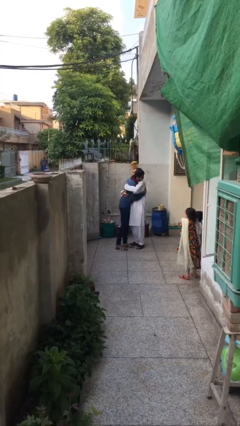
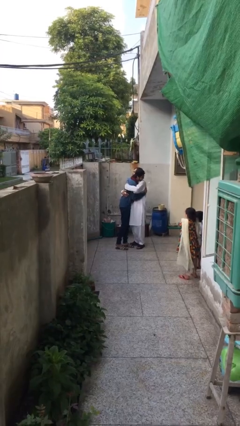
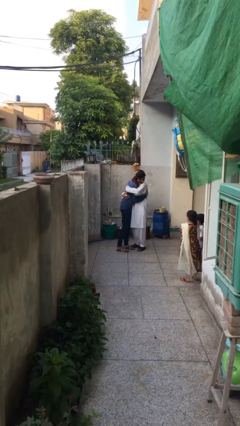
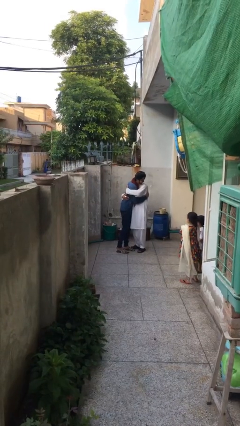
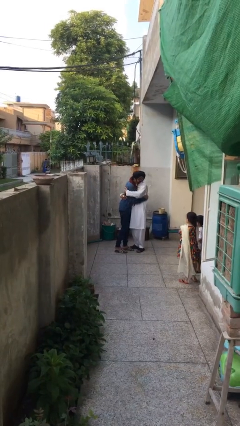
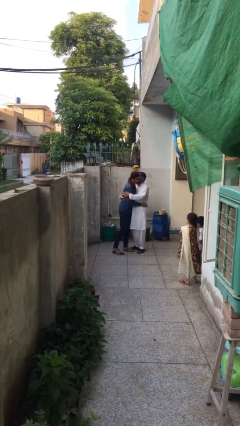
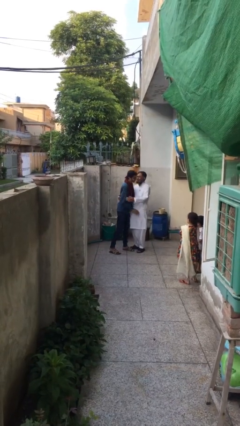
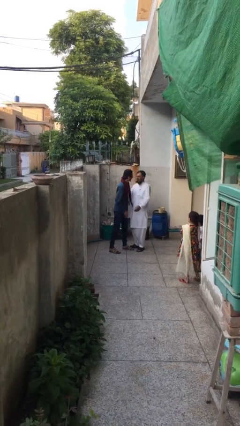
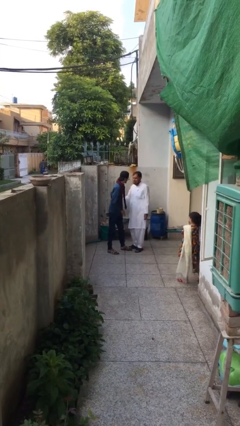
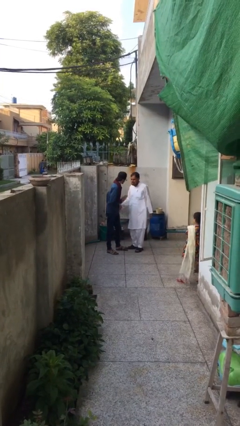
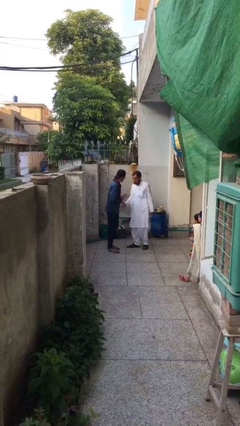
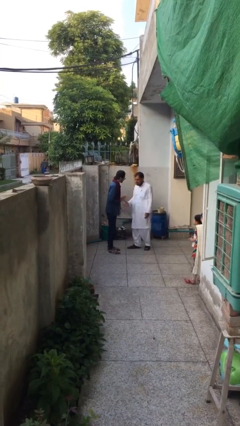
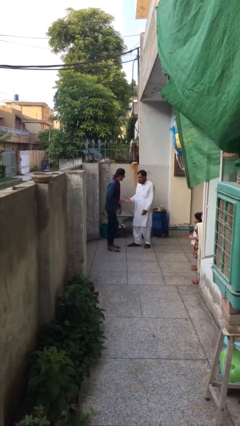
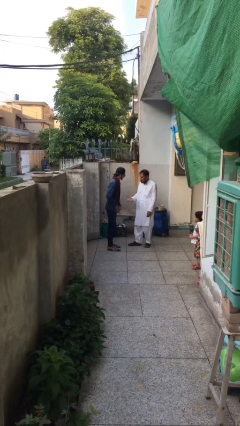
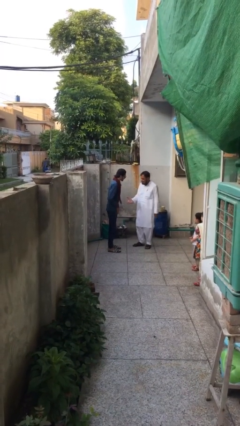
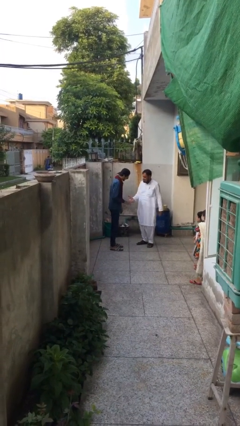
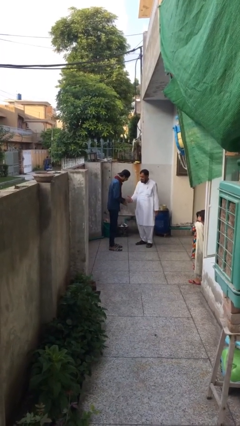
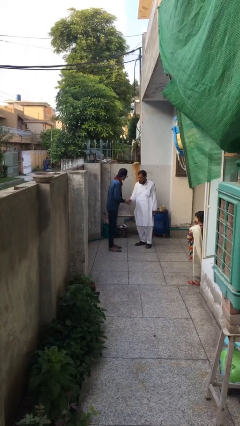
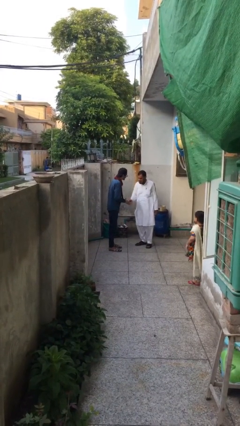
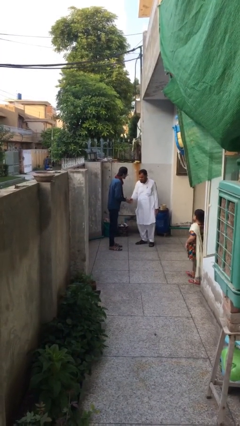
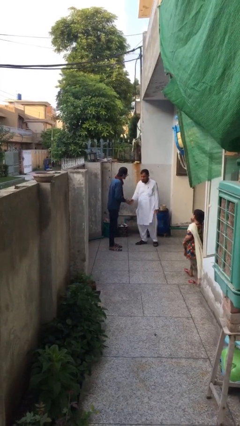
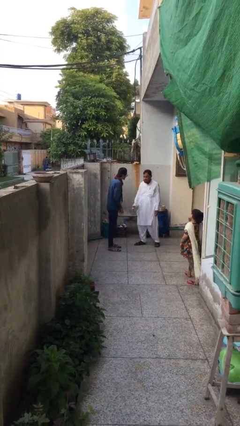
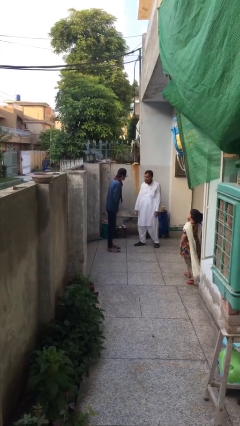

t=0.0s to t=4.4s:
person talks to person

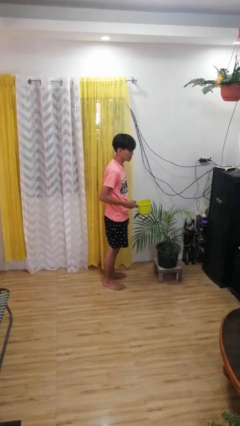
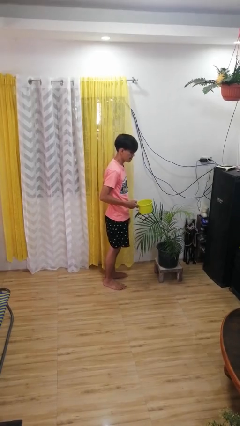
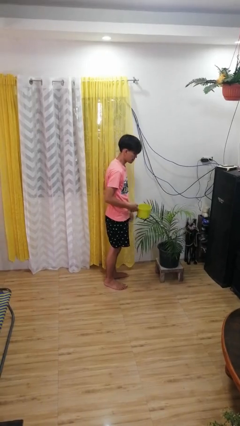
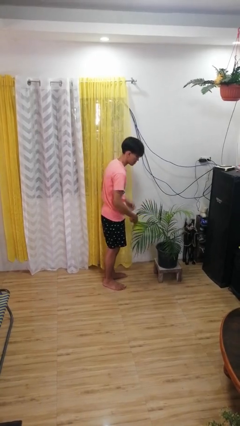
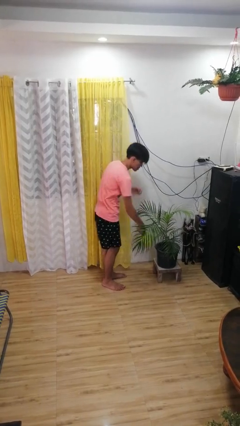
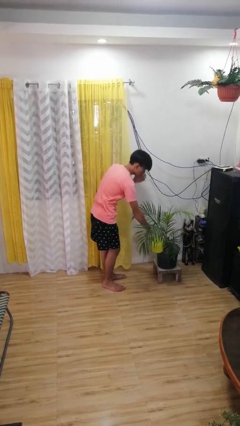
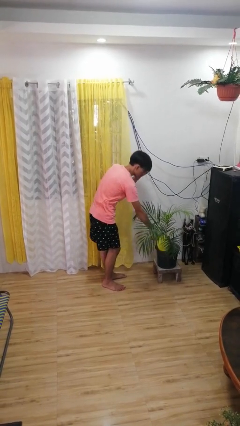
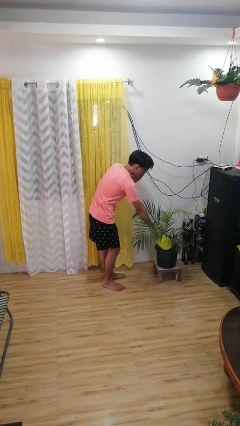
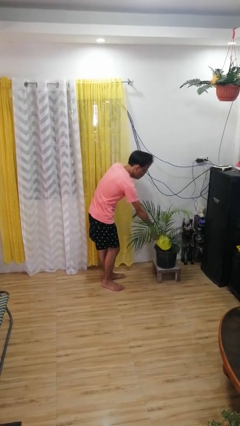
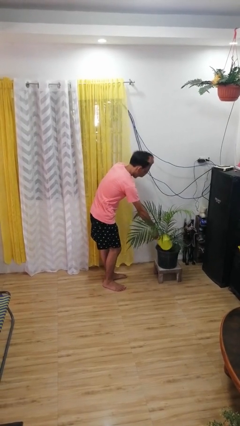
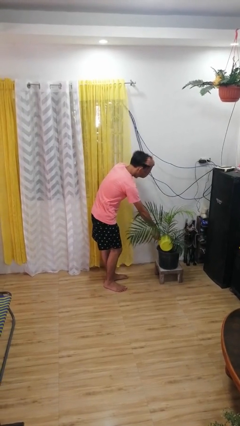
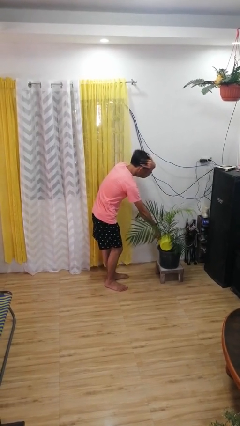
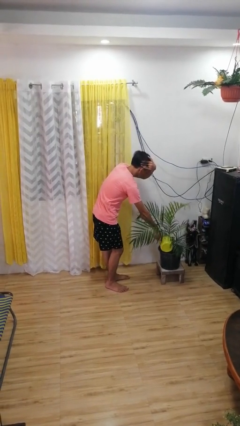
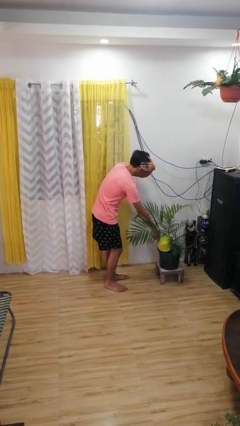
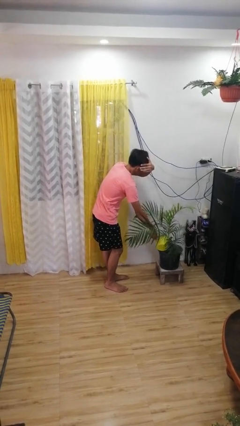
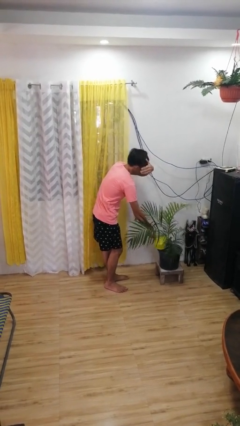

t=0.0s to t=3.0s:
person waters houseplant

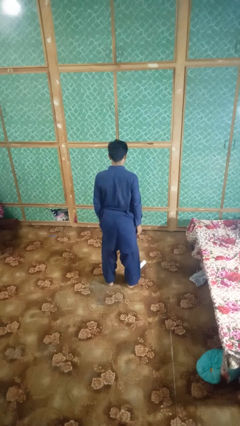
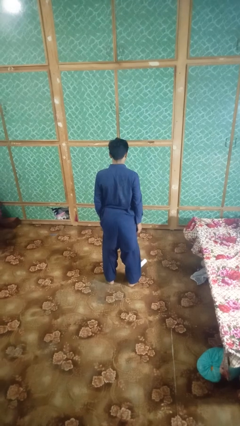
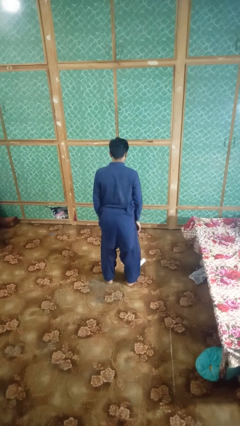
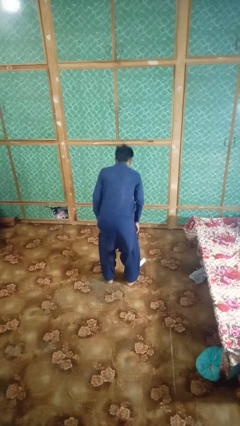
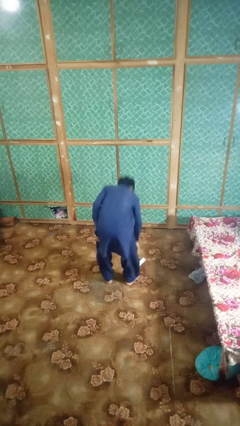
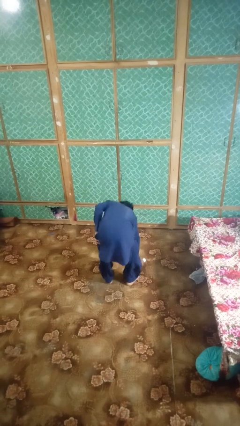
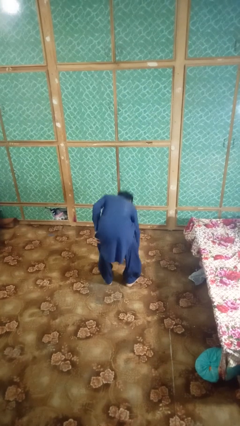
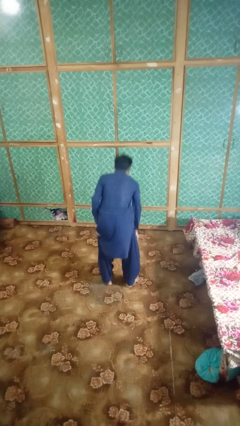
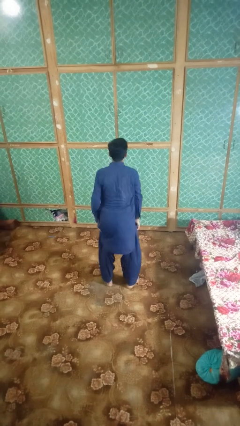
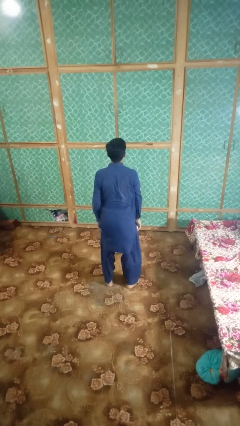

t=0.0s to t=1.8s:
person picks up object from floor

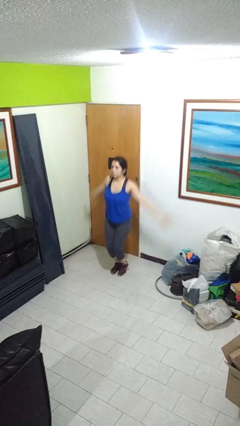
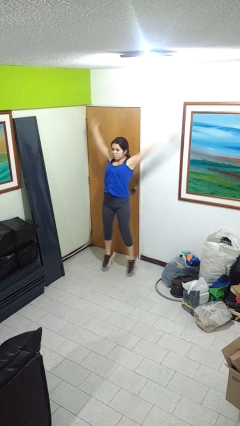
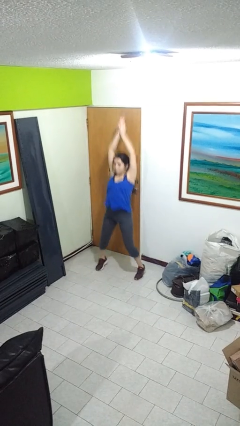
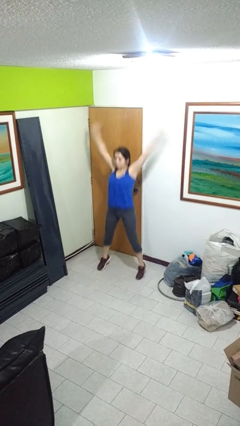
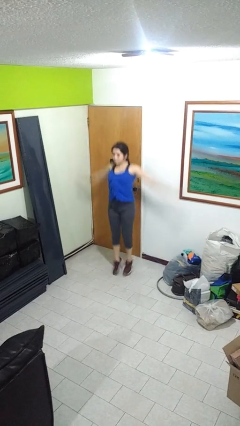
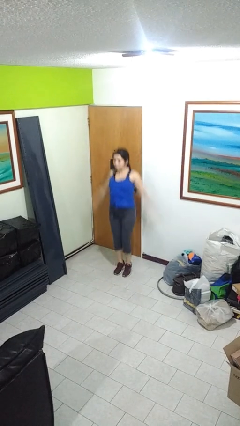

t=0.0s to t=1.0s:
person exercises with jumping jacks

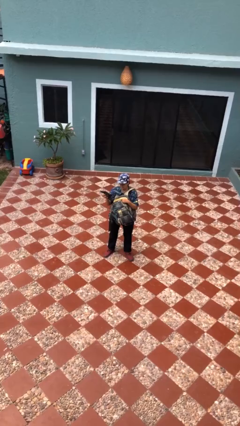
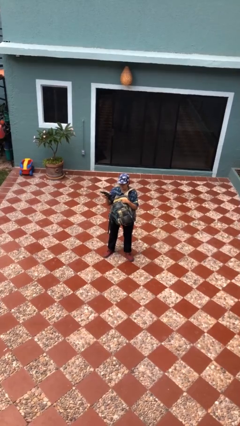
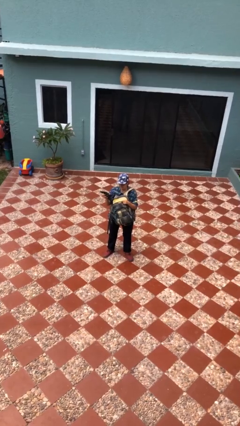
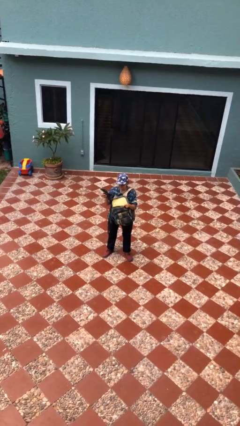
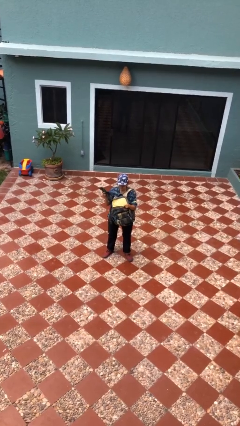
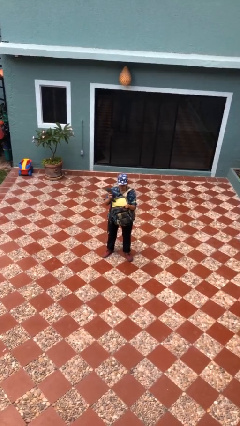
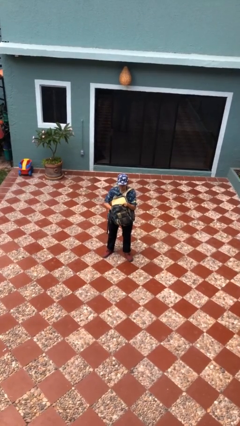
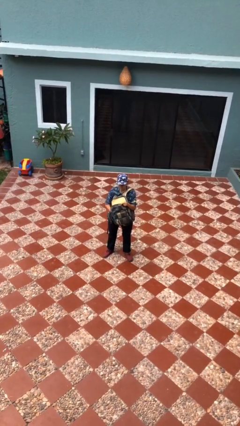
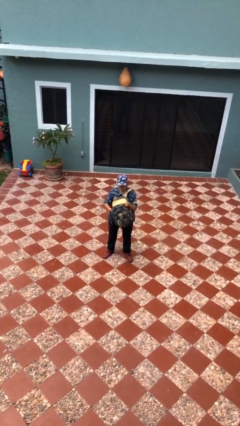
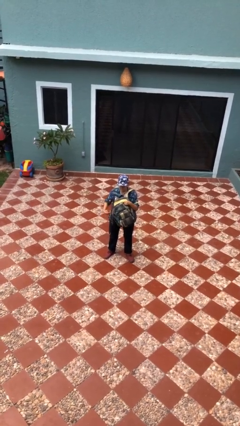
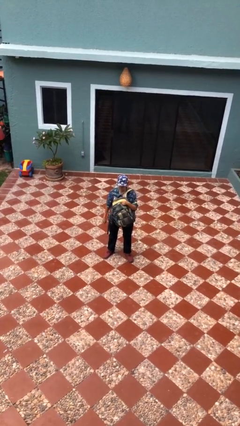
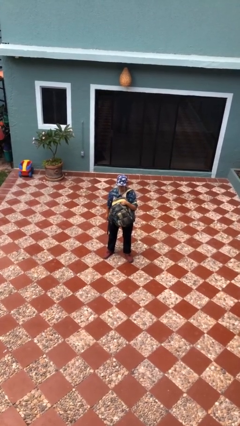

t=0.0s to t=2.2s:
person puts object into backpack

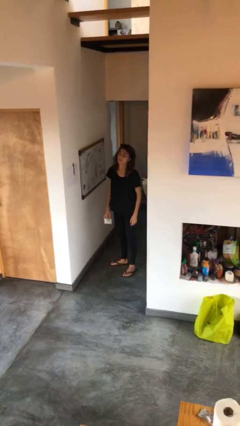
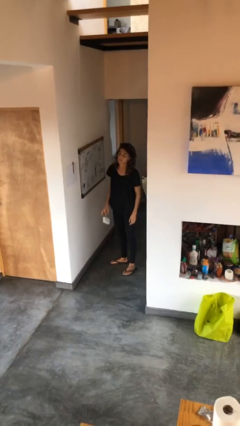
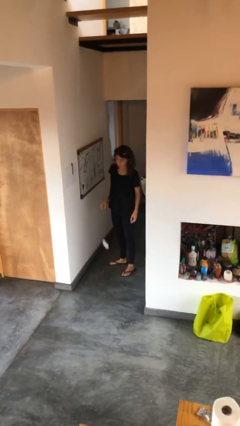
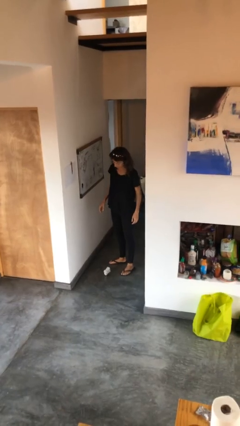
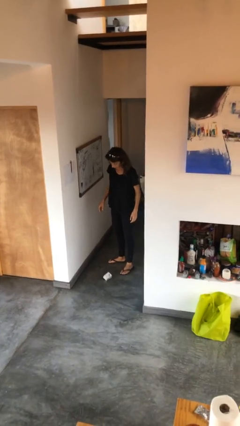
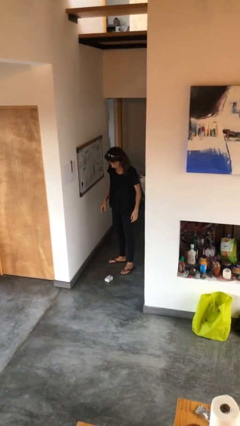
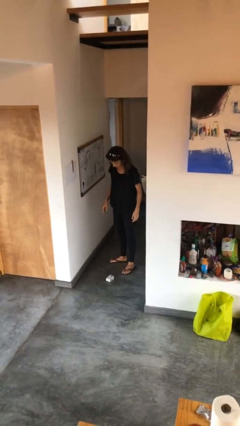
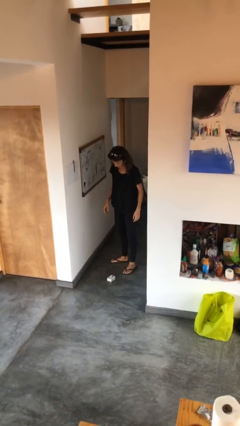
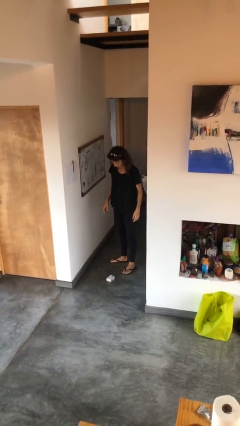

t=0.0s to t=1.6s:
person drops object

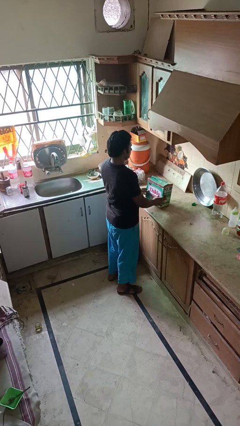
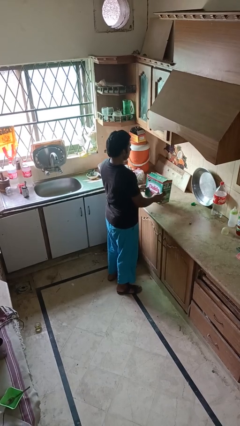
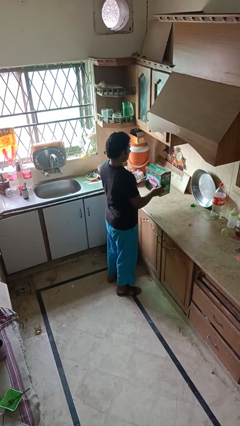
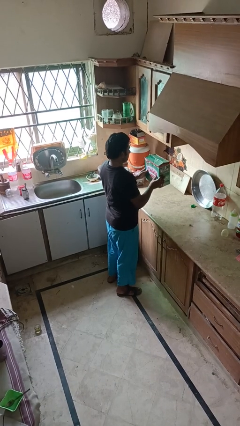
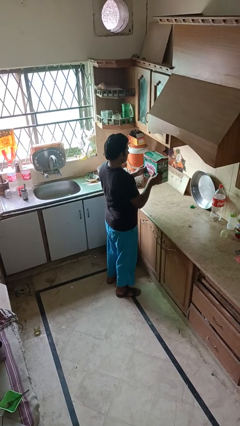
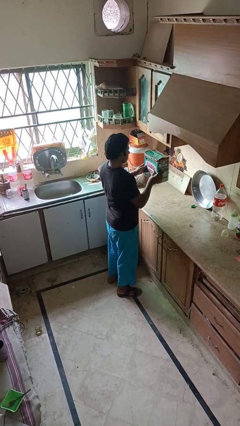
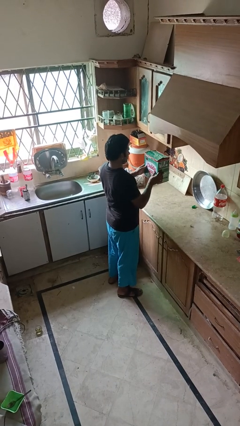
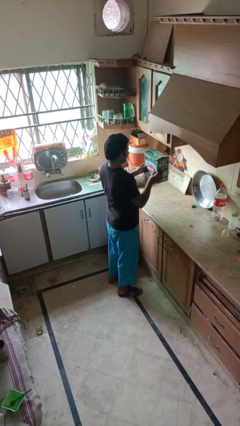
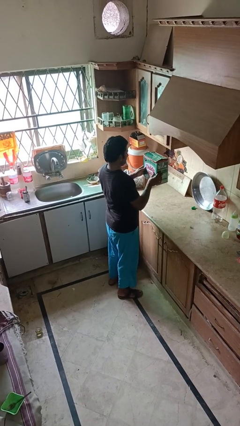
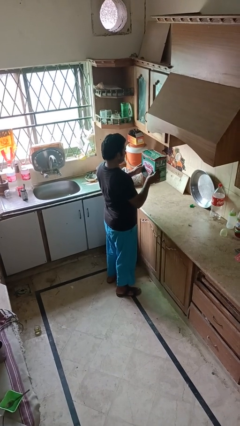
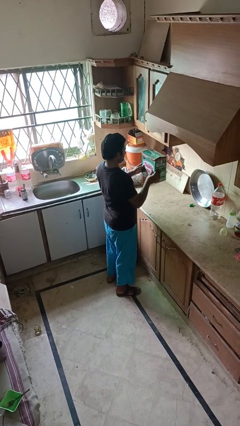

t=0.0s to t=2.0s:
person picks up object from countertop

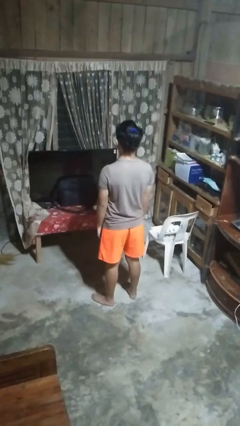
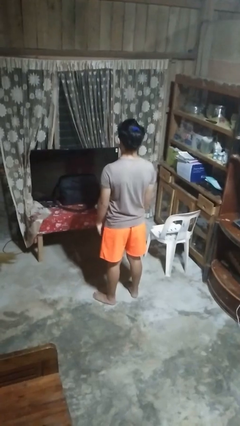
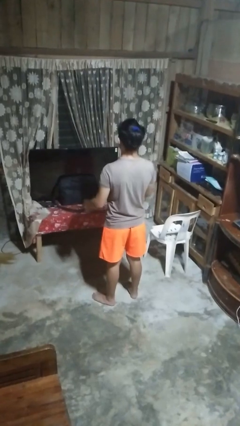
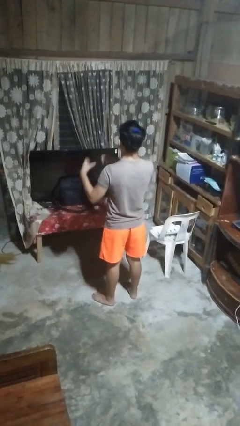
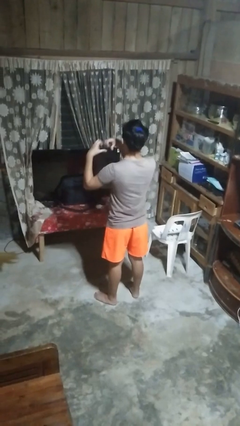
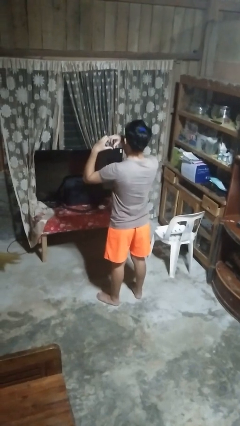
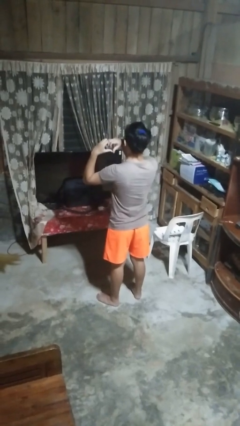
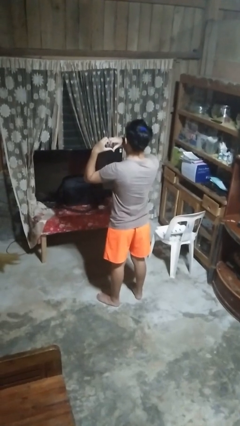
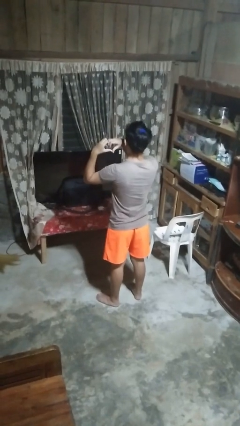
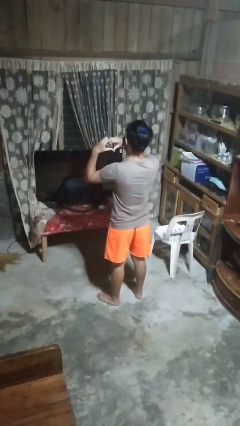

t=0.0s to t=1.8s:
person gestures heart
